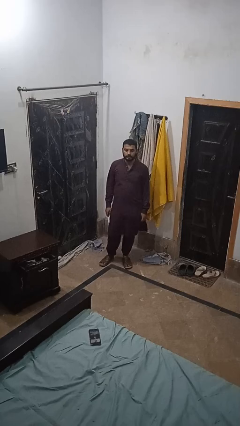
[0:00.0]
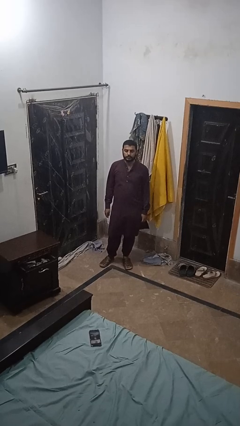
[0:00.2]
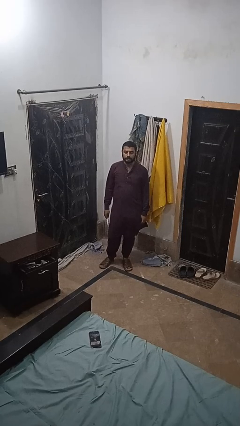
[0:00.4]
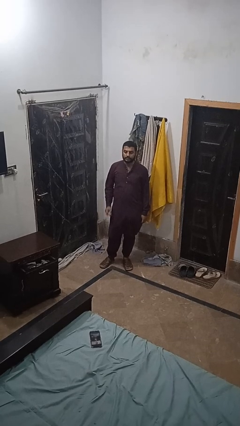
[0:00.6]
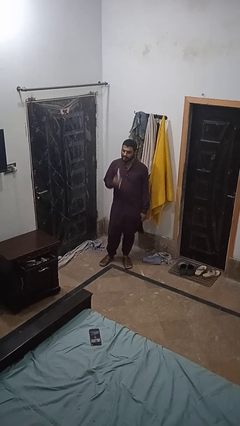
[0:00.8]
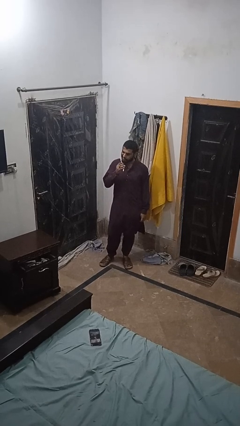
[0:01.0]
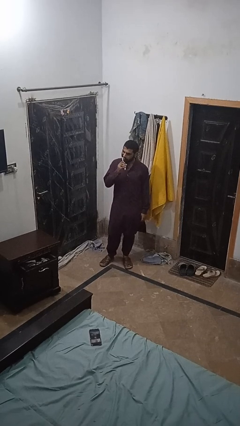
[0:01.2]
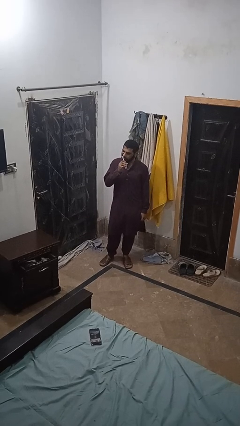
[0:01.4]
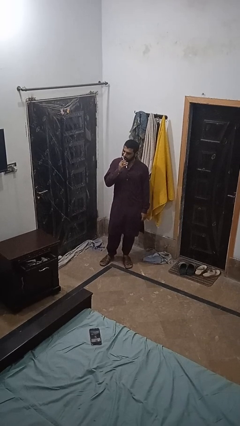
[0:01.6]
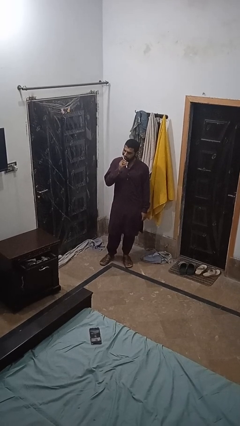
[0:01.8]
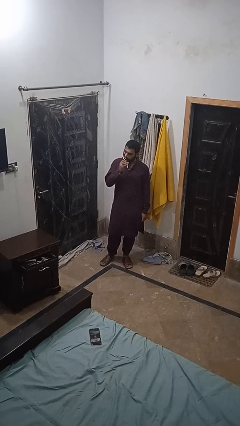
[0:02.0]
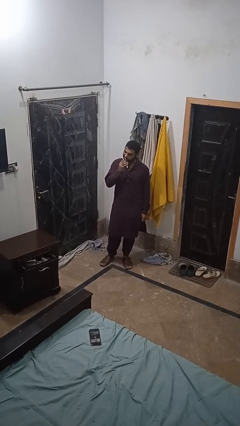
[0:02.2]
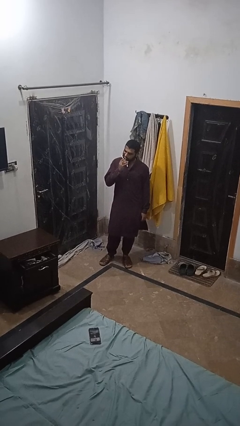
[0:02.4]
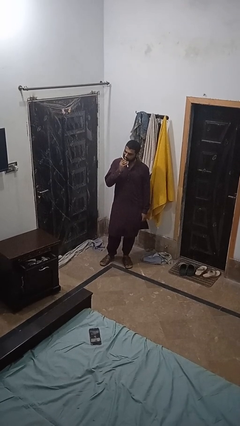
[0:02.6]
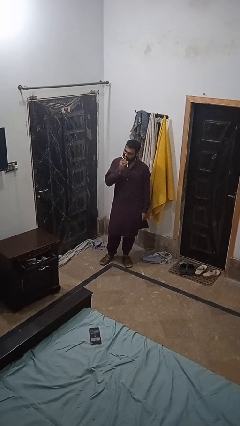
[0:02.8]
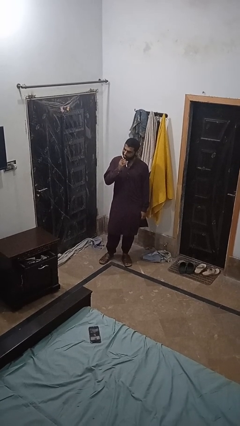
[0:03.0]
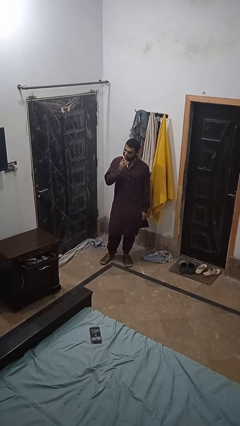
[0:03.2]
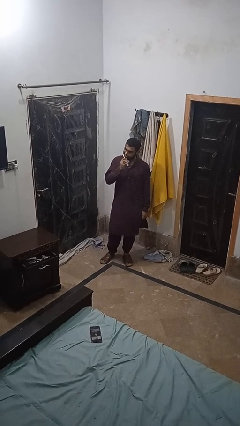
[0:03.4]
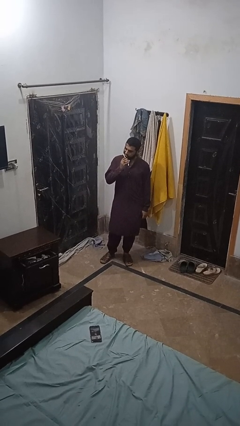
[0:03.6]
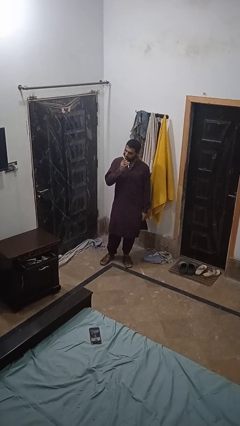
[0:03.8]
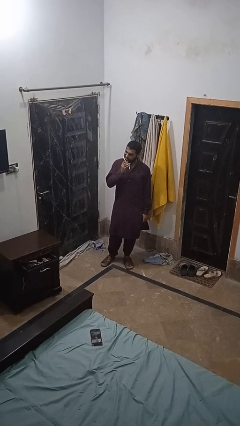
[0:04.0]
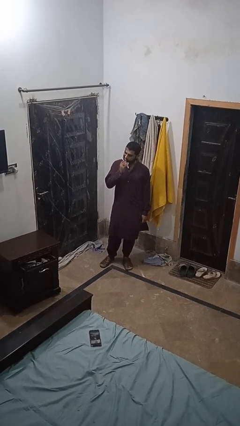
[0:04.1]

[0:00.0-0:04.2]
person brushes teeth

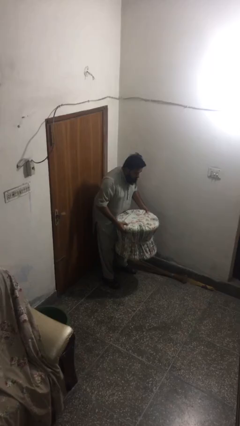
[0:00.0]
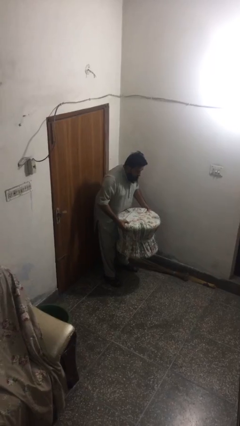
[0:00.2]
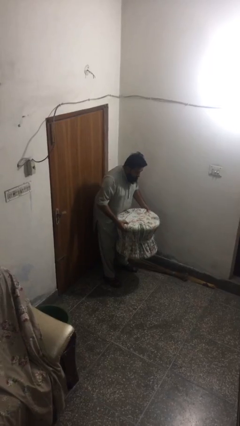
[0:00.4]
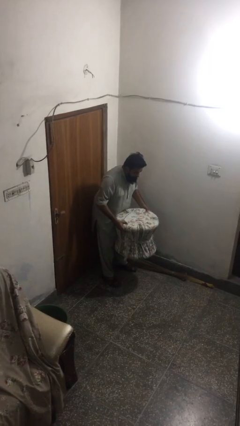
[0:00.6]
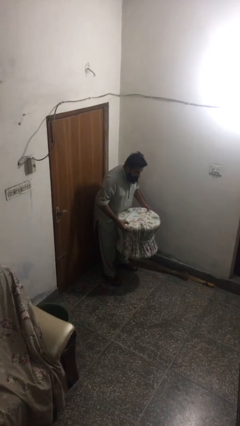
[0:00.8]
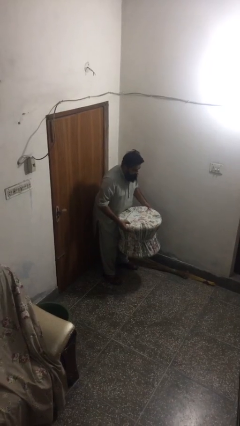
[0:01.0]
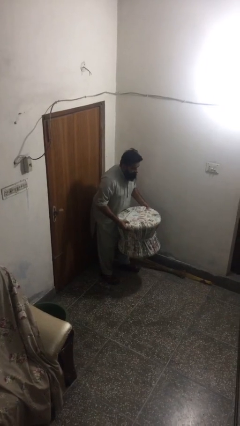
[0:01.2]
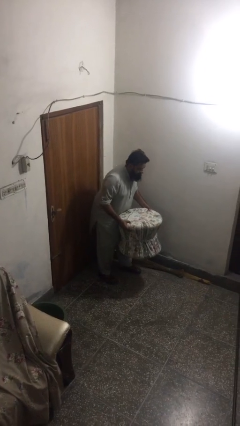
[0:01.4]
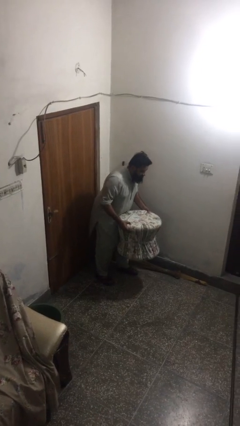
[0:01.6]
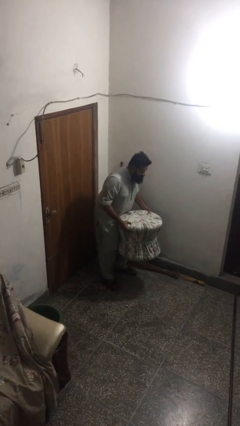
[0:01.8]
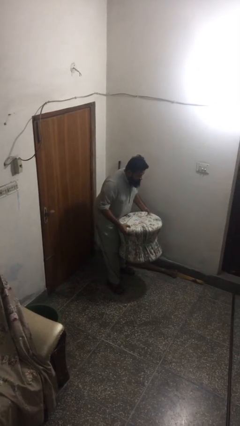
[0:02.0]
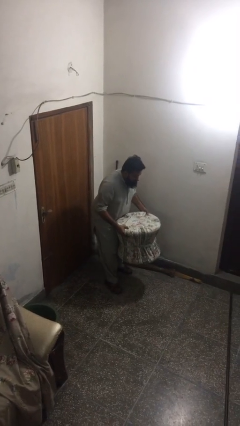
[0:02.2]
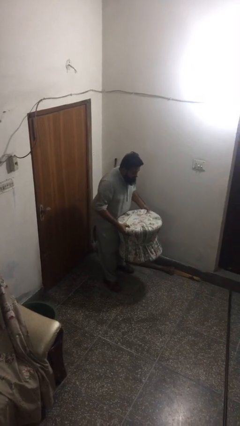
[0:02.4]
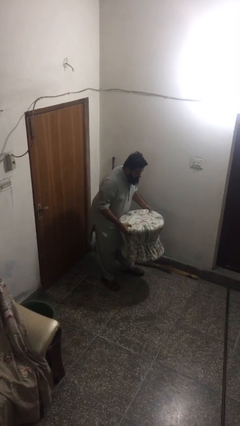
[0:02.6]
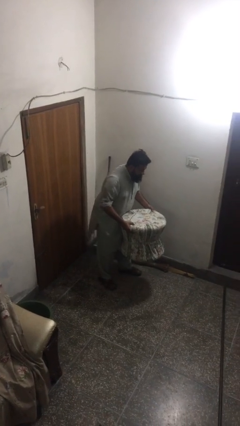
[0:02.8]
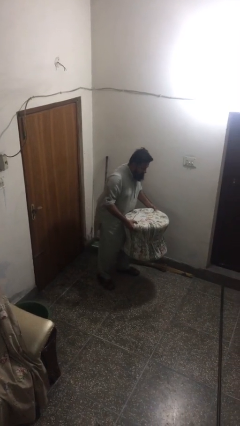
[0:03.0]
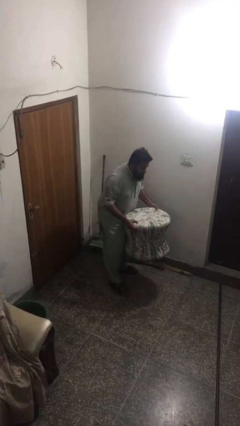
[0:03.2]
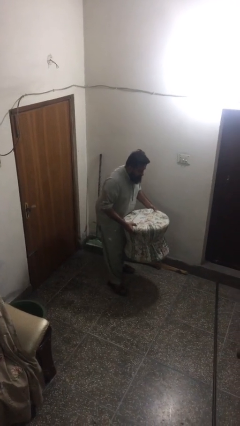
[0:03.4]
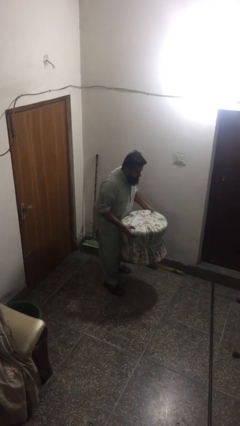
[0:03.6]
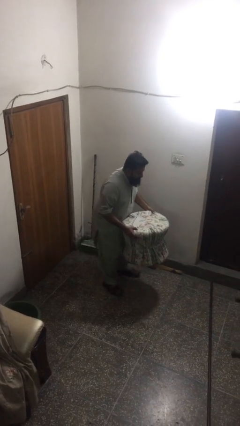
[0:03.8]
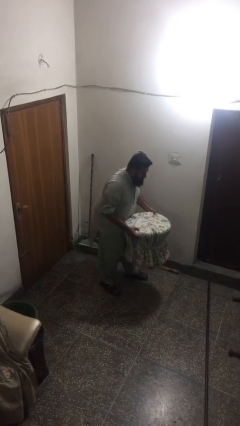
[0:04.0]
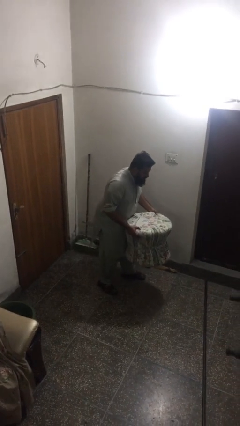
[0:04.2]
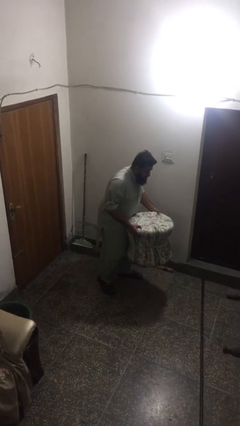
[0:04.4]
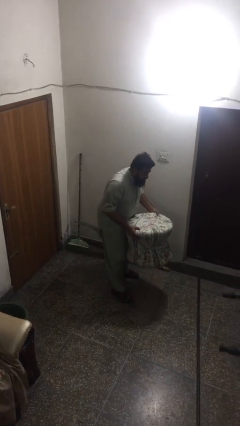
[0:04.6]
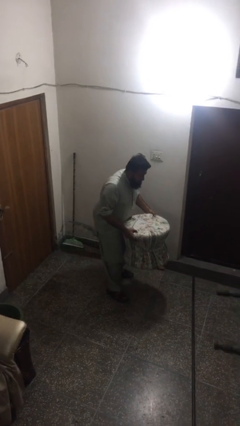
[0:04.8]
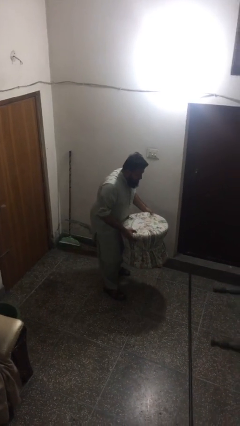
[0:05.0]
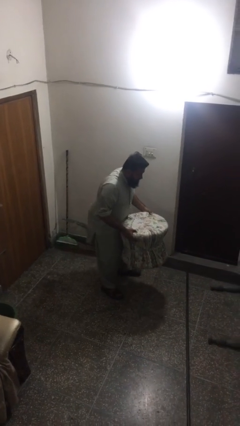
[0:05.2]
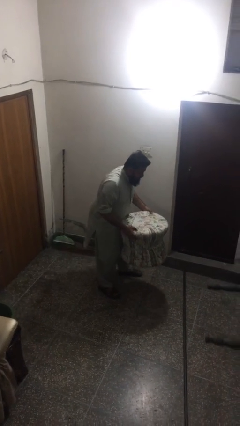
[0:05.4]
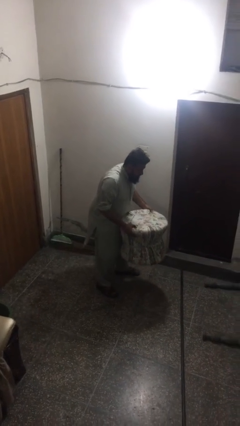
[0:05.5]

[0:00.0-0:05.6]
person carries heavy object

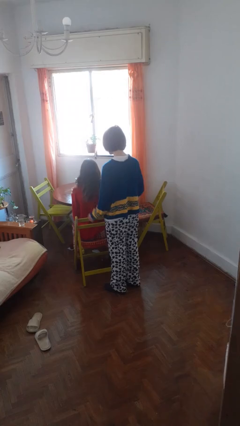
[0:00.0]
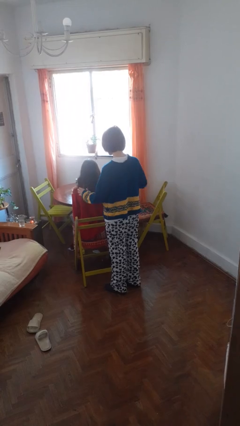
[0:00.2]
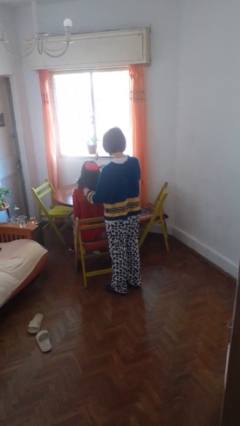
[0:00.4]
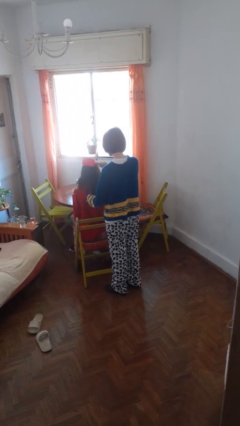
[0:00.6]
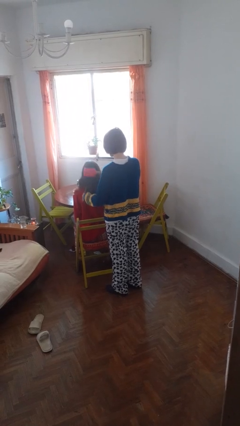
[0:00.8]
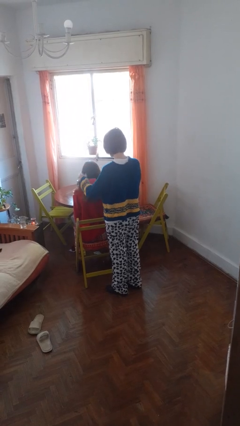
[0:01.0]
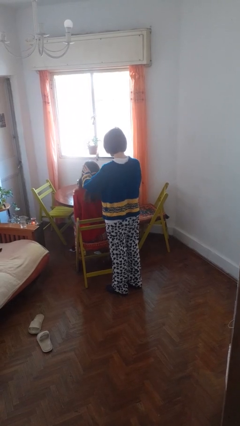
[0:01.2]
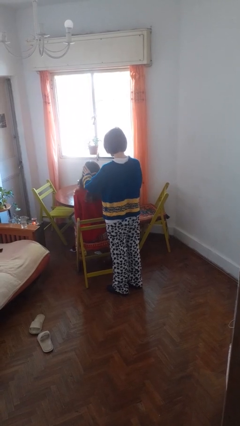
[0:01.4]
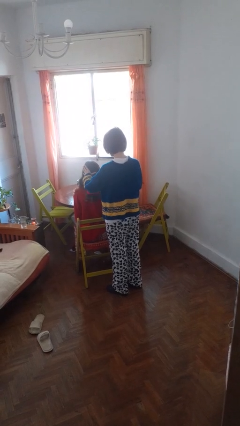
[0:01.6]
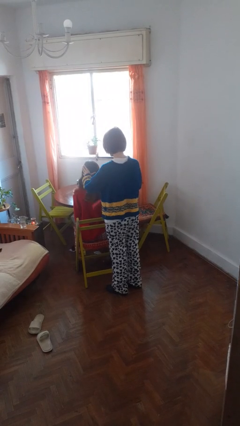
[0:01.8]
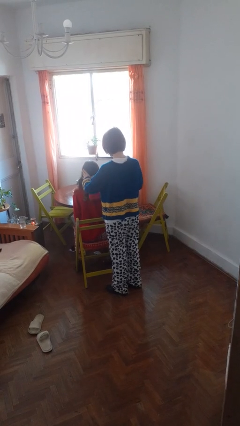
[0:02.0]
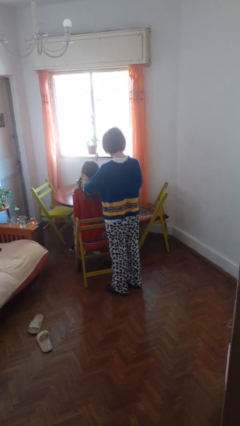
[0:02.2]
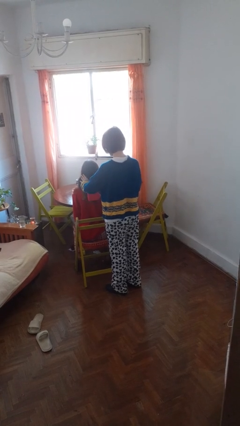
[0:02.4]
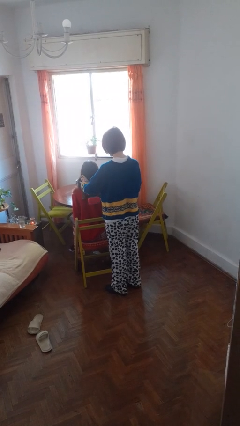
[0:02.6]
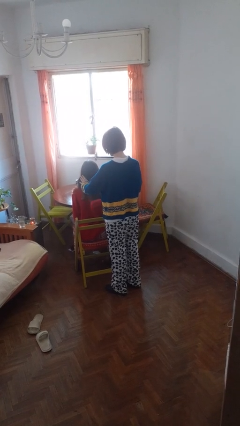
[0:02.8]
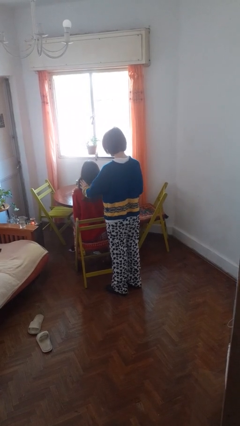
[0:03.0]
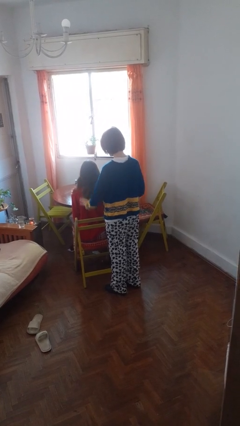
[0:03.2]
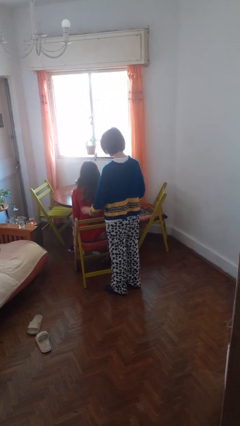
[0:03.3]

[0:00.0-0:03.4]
person brushes hair of person

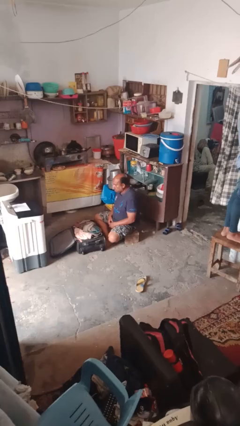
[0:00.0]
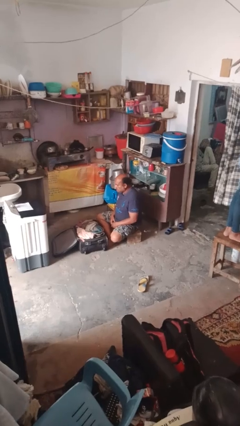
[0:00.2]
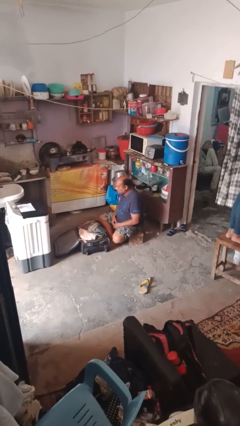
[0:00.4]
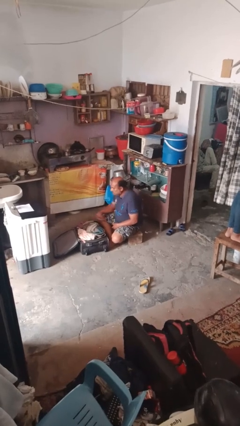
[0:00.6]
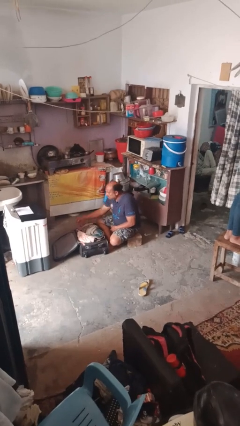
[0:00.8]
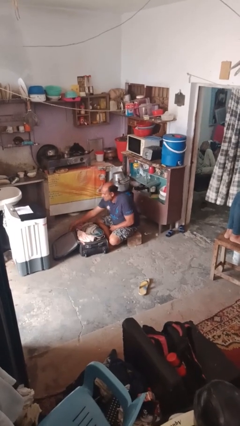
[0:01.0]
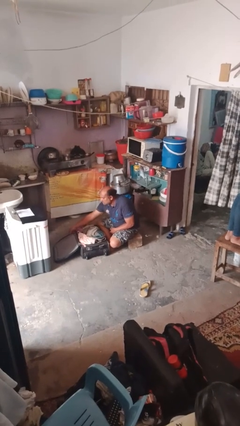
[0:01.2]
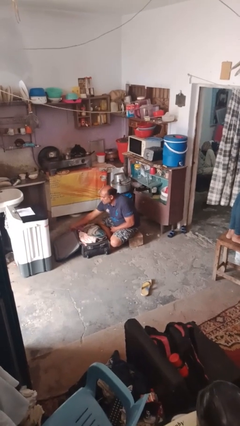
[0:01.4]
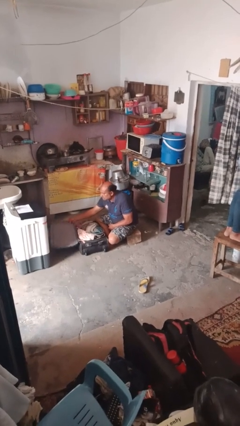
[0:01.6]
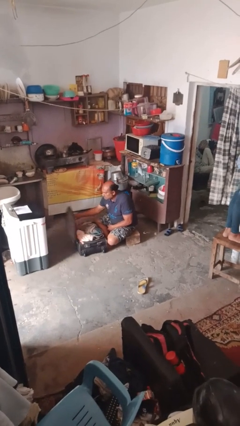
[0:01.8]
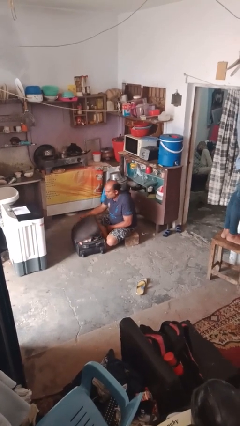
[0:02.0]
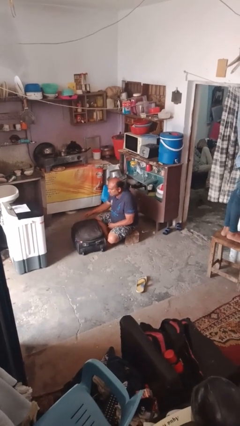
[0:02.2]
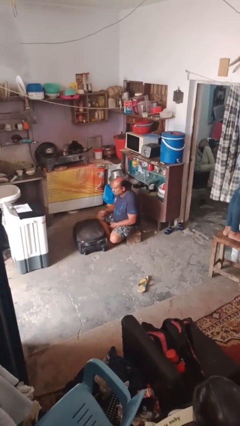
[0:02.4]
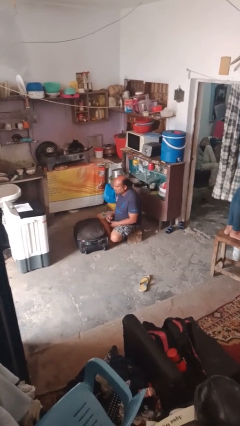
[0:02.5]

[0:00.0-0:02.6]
person closes suitcase

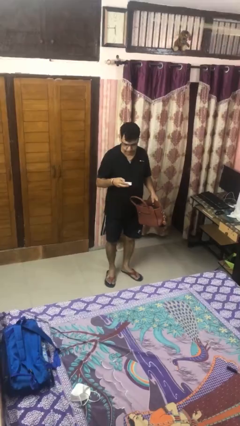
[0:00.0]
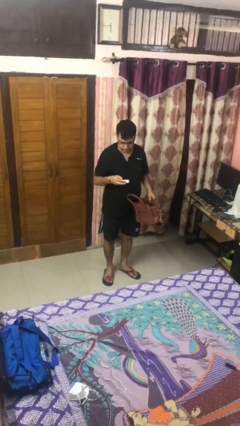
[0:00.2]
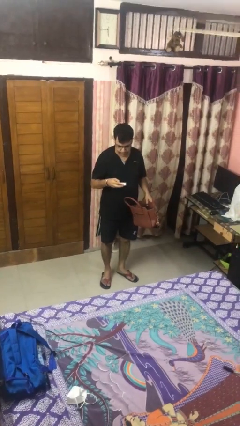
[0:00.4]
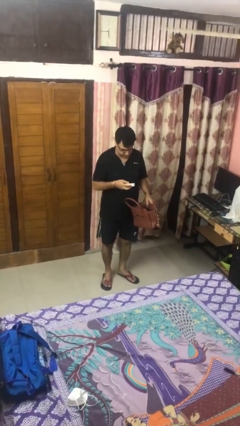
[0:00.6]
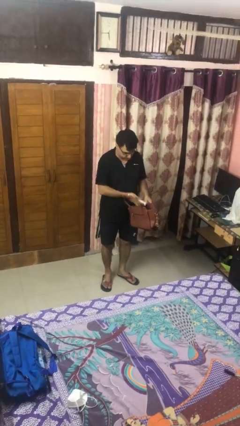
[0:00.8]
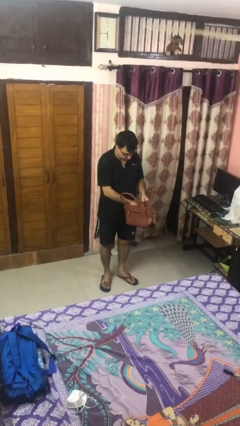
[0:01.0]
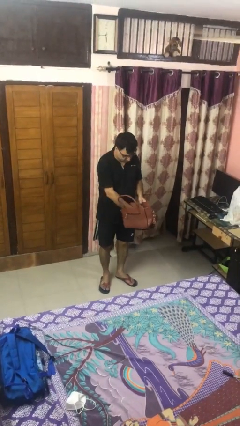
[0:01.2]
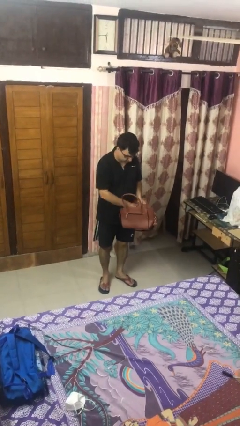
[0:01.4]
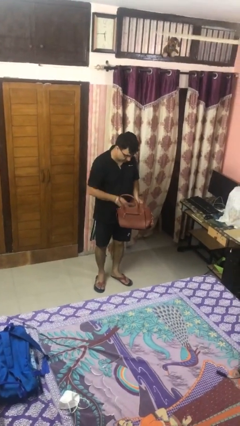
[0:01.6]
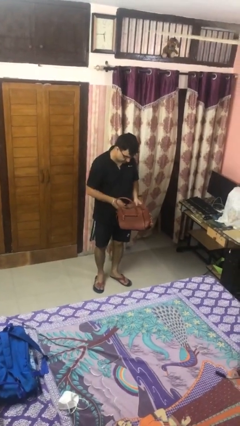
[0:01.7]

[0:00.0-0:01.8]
person puts object into purse

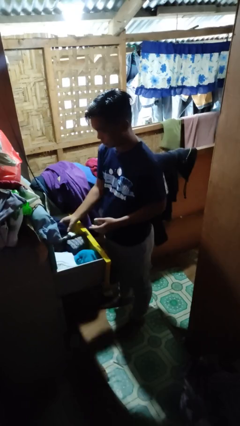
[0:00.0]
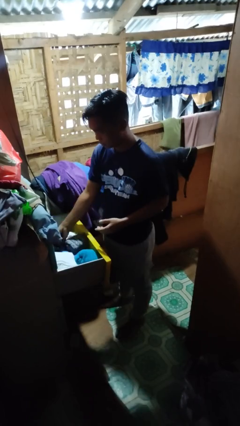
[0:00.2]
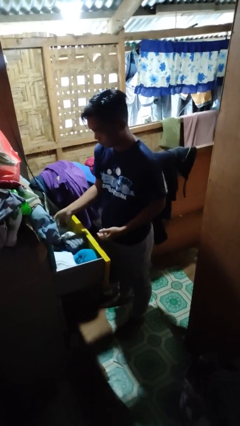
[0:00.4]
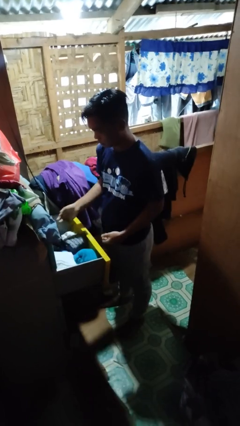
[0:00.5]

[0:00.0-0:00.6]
person puts clothes into dresser
